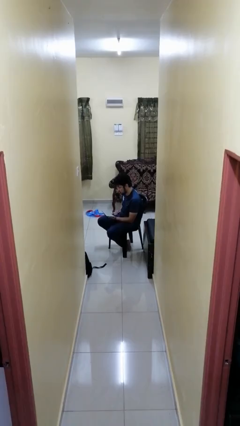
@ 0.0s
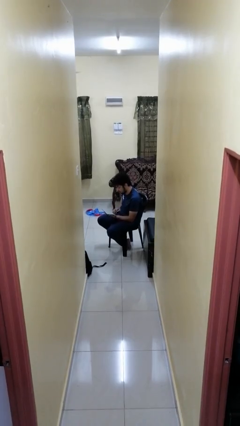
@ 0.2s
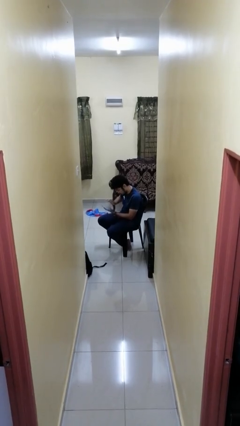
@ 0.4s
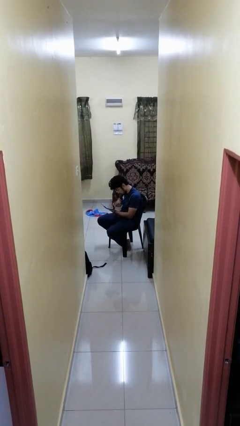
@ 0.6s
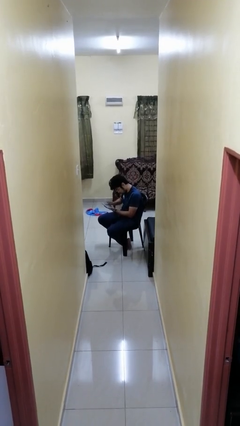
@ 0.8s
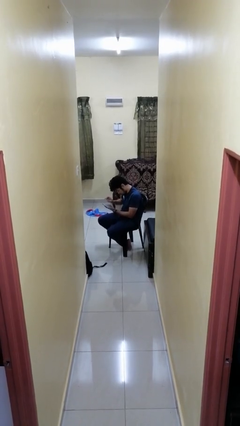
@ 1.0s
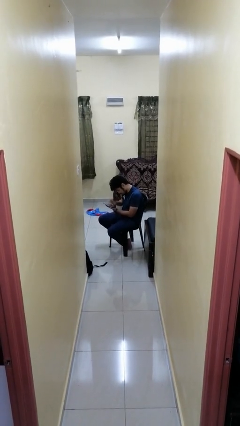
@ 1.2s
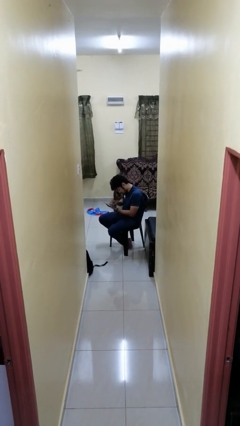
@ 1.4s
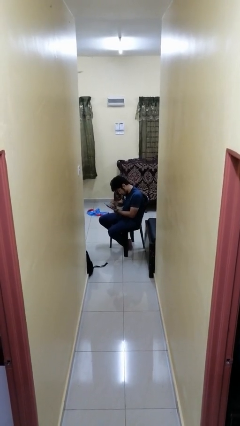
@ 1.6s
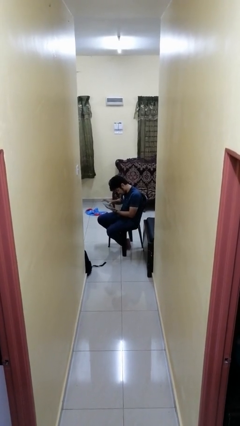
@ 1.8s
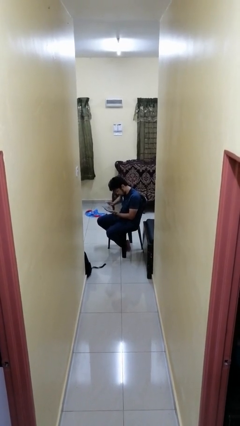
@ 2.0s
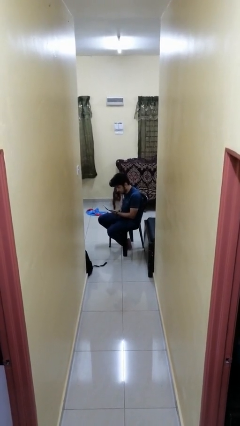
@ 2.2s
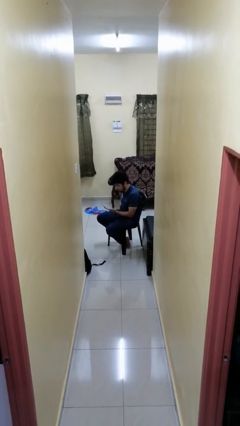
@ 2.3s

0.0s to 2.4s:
person interacts with tablet

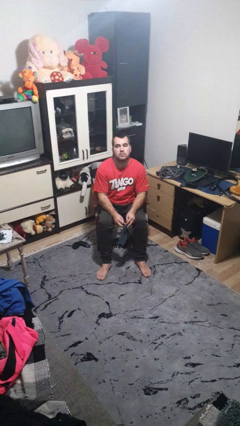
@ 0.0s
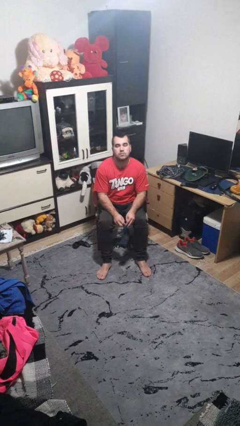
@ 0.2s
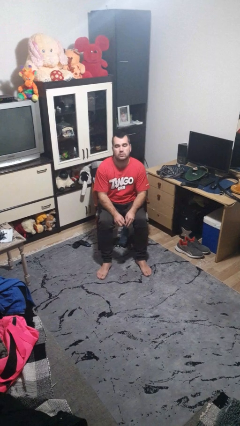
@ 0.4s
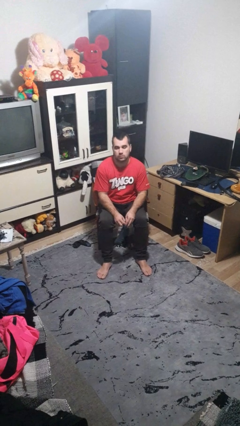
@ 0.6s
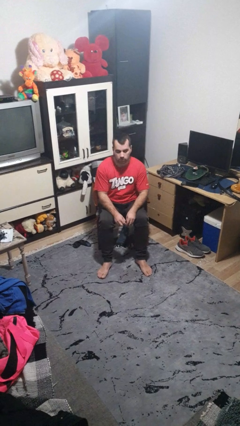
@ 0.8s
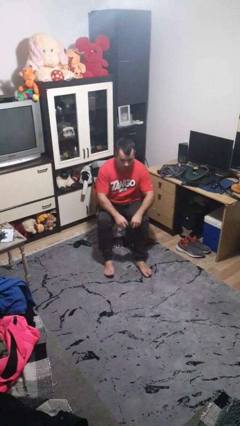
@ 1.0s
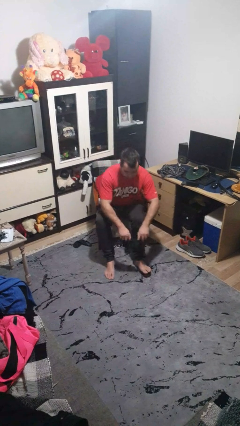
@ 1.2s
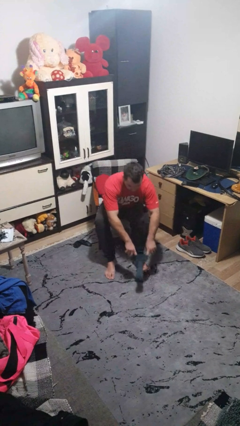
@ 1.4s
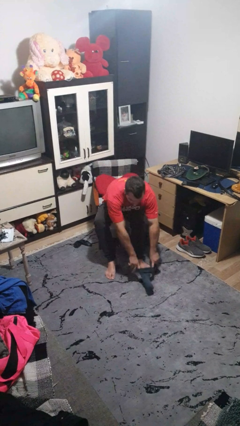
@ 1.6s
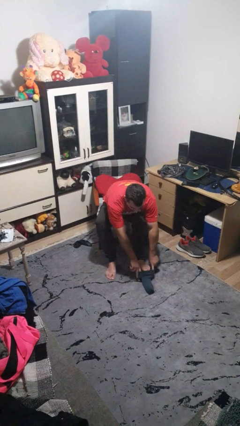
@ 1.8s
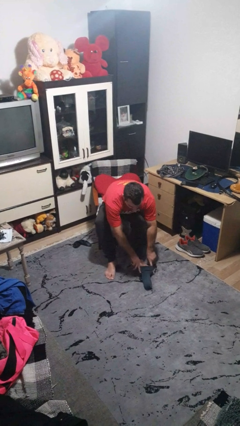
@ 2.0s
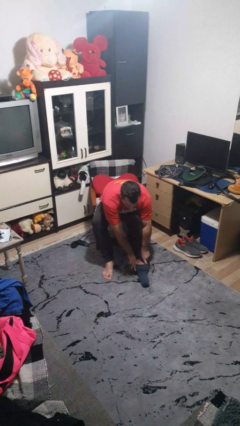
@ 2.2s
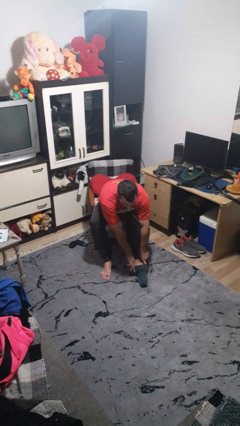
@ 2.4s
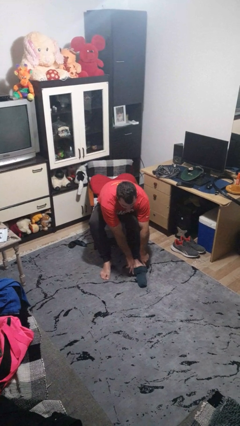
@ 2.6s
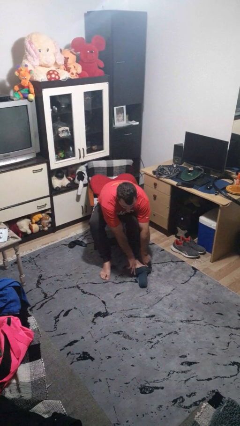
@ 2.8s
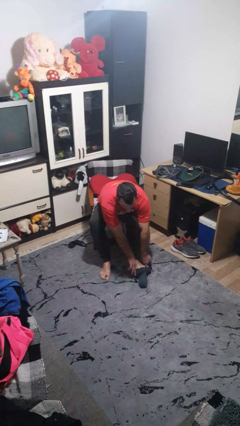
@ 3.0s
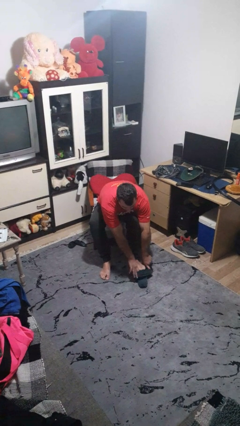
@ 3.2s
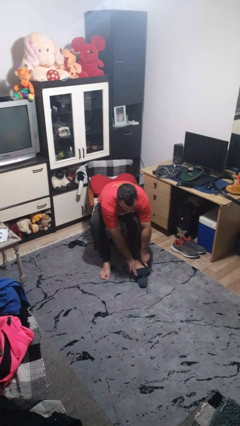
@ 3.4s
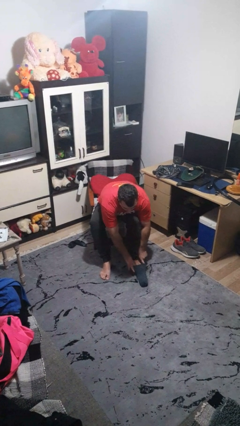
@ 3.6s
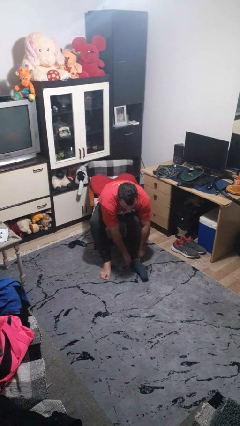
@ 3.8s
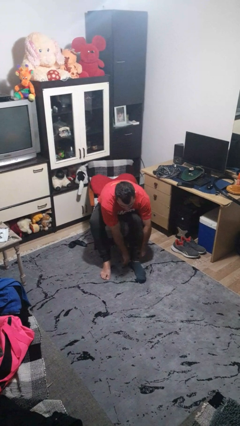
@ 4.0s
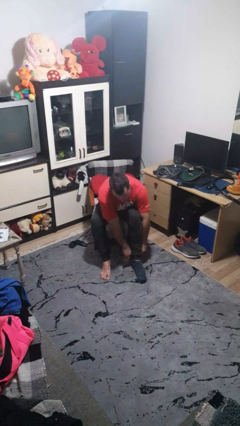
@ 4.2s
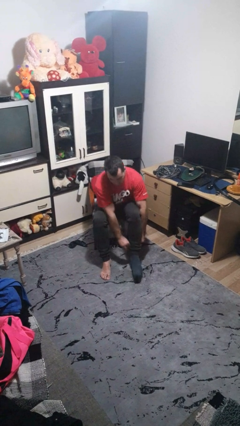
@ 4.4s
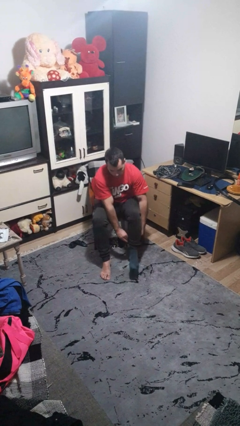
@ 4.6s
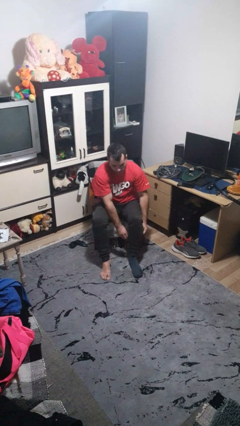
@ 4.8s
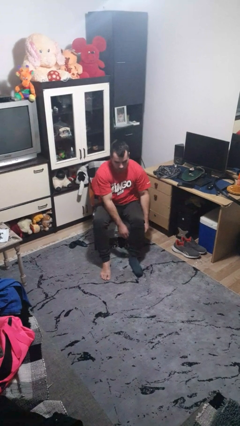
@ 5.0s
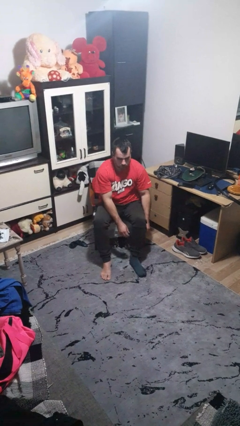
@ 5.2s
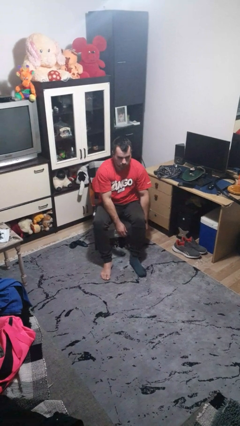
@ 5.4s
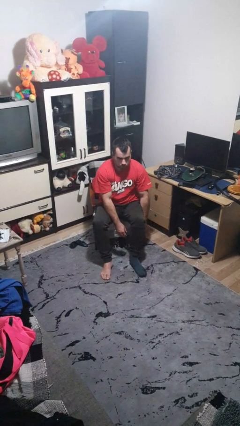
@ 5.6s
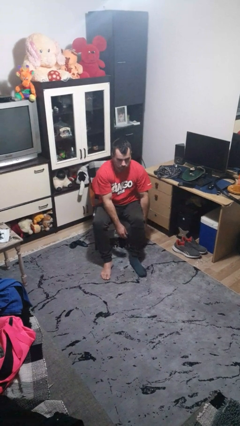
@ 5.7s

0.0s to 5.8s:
person puts on socks

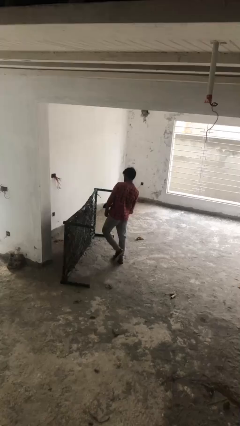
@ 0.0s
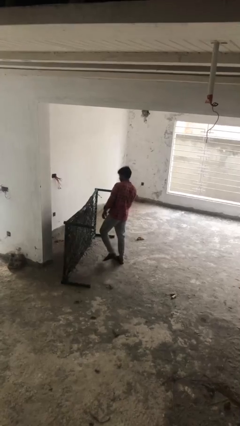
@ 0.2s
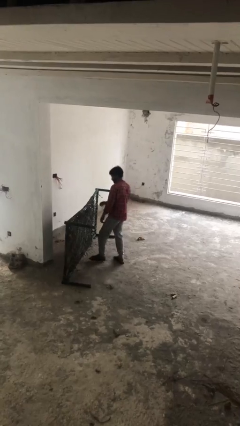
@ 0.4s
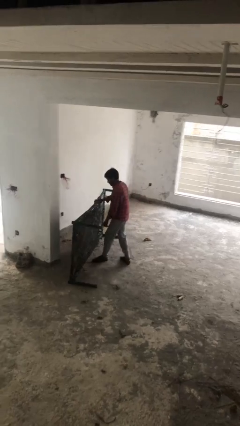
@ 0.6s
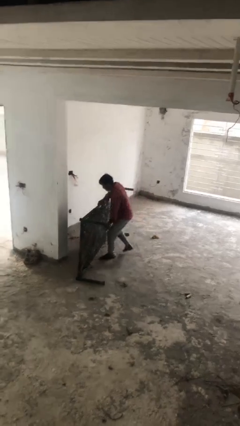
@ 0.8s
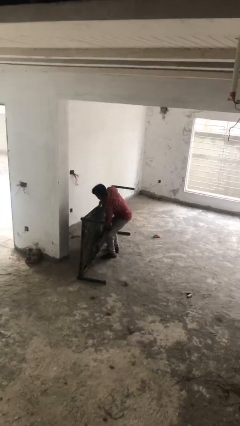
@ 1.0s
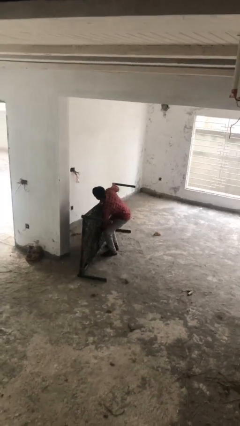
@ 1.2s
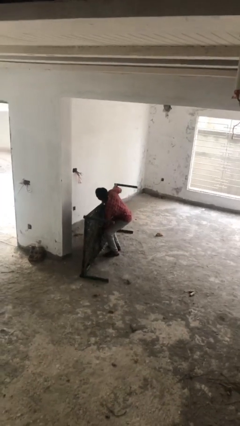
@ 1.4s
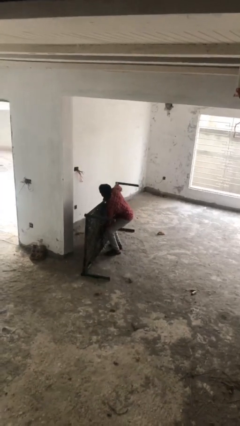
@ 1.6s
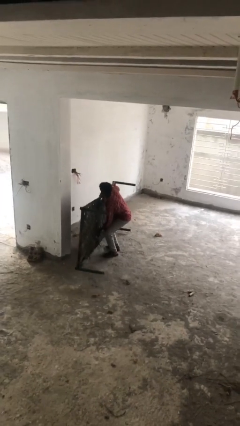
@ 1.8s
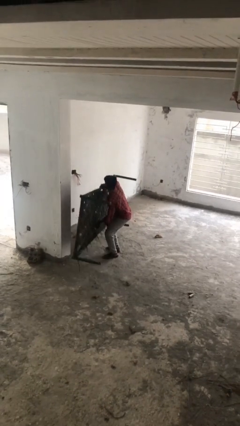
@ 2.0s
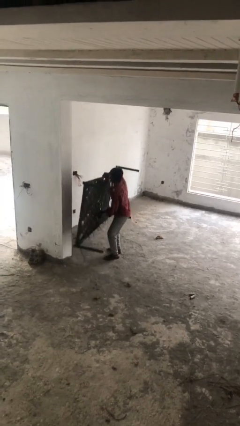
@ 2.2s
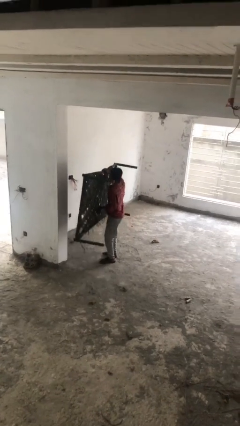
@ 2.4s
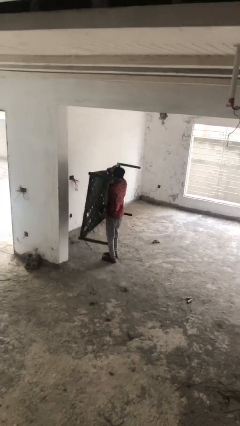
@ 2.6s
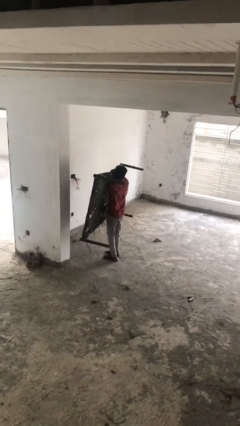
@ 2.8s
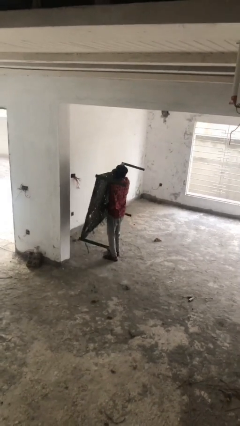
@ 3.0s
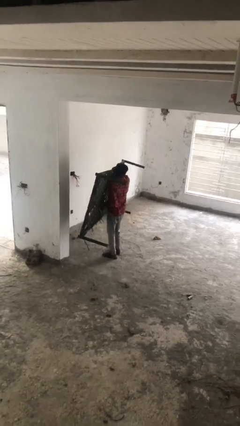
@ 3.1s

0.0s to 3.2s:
person picks up object from floor

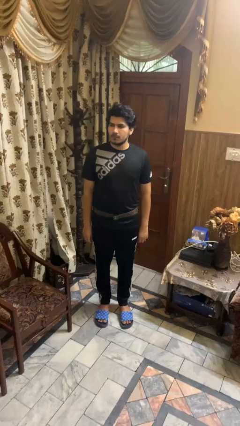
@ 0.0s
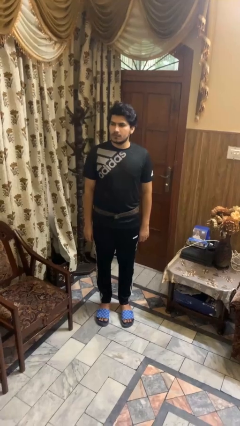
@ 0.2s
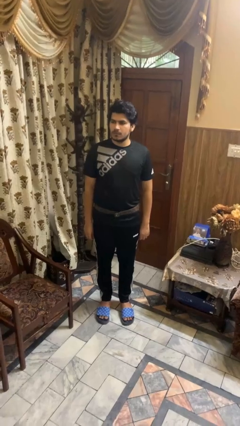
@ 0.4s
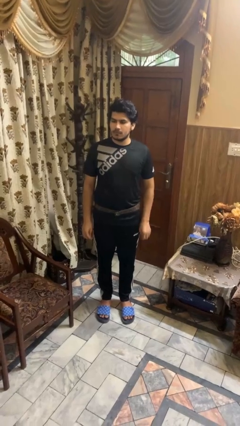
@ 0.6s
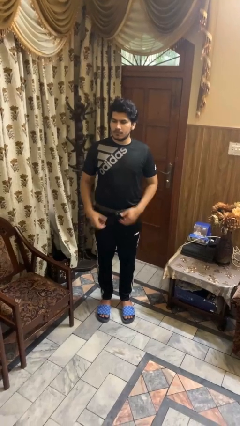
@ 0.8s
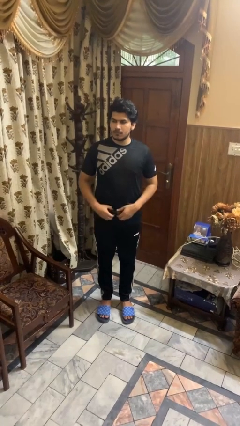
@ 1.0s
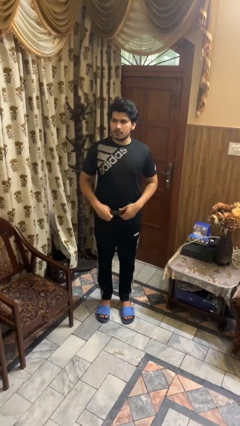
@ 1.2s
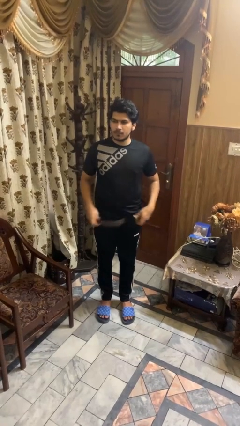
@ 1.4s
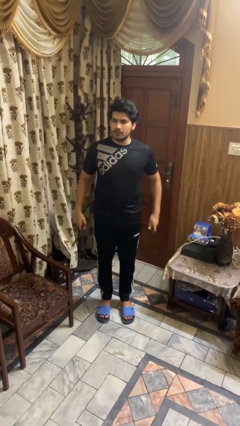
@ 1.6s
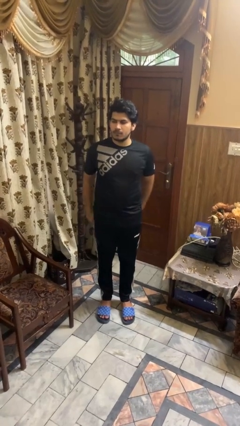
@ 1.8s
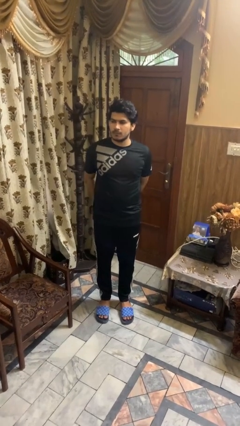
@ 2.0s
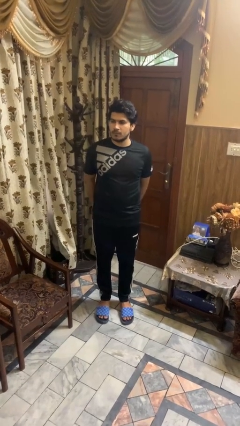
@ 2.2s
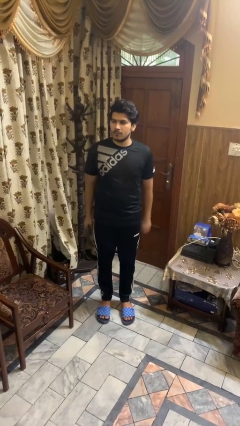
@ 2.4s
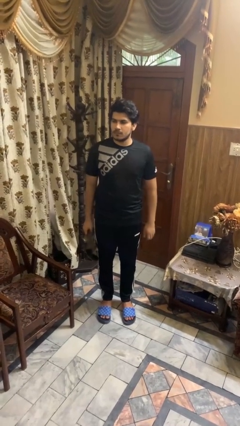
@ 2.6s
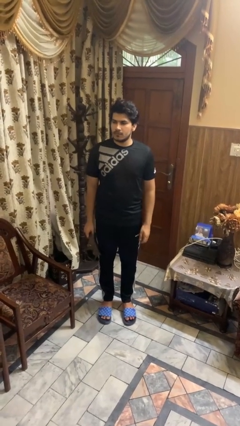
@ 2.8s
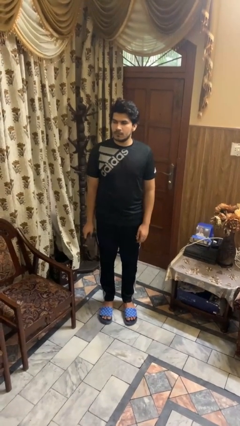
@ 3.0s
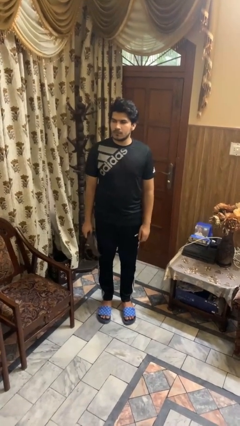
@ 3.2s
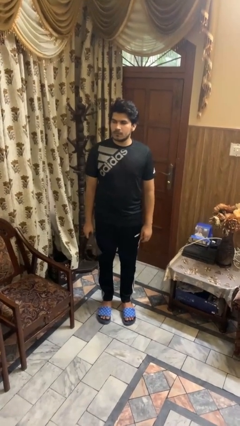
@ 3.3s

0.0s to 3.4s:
person takes off belt

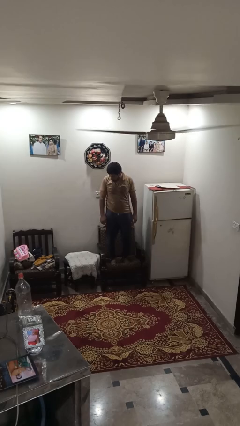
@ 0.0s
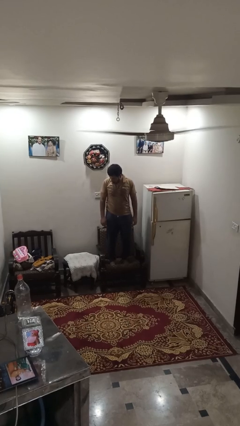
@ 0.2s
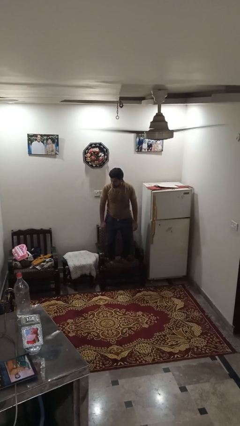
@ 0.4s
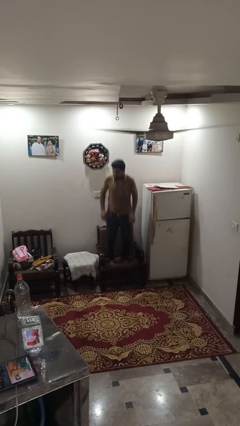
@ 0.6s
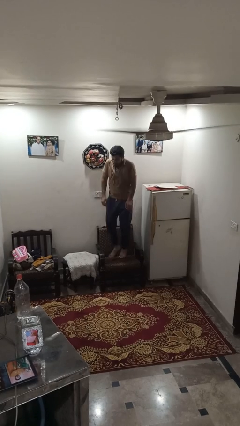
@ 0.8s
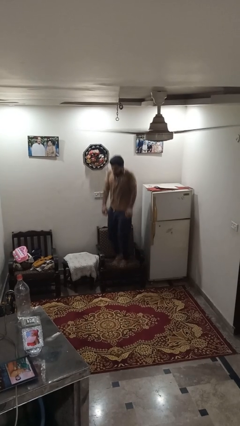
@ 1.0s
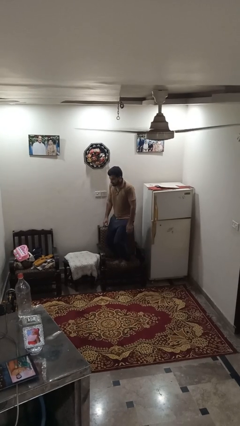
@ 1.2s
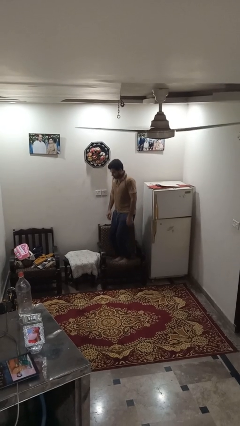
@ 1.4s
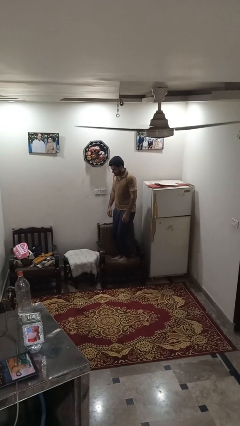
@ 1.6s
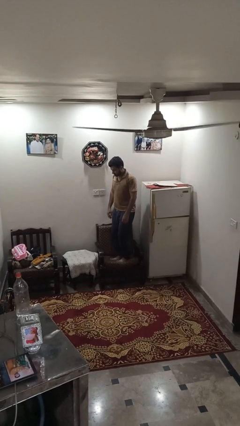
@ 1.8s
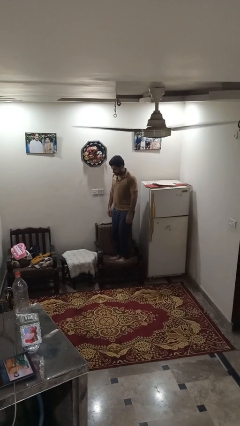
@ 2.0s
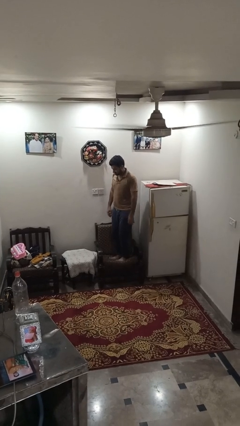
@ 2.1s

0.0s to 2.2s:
person jumps on couch

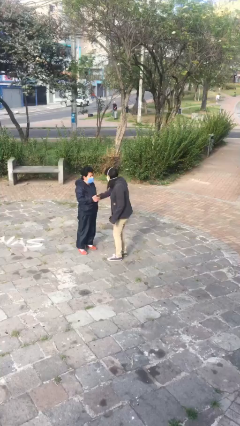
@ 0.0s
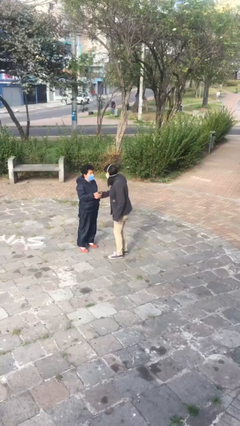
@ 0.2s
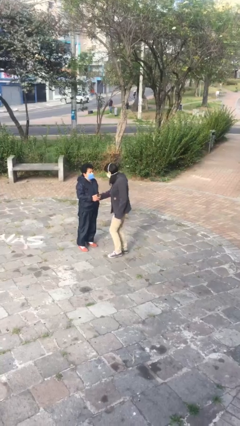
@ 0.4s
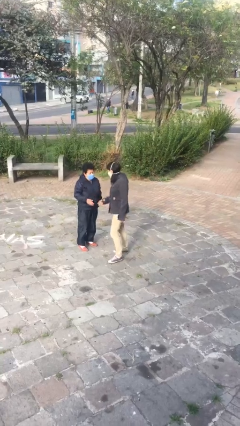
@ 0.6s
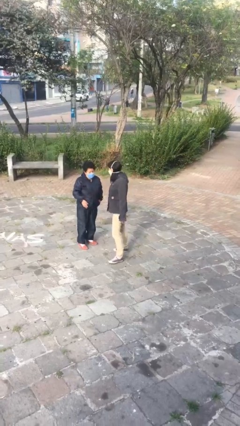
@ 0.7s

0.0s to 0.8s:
person shakes hand
